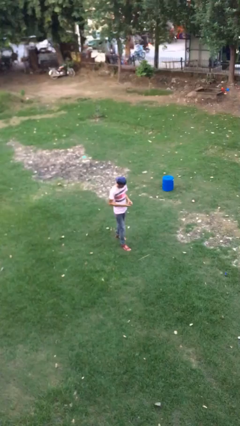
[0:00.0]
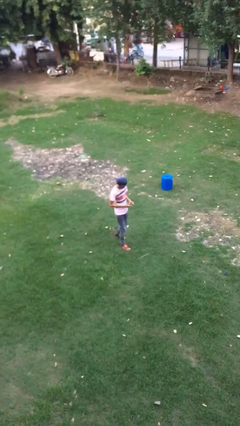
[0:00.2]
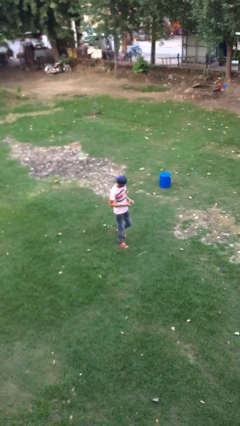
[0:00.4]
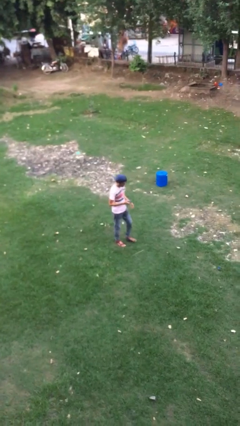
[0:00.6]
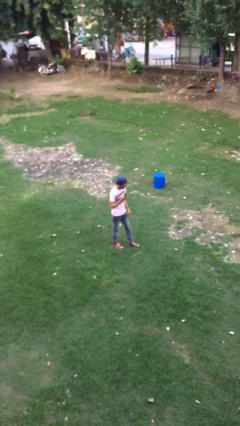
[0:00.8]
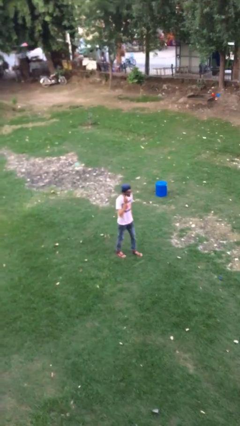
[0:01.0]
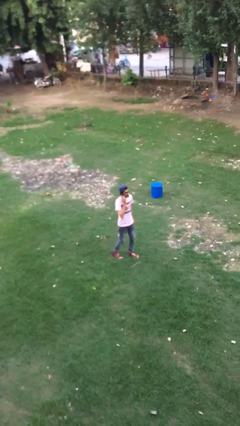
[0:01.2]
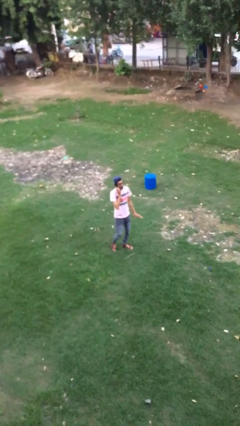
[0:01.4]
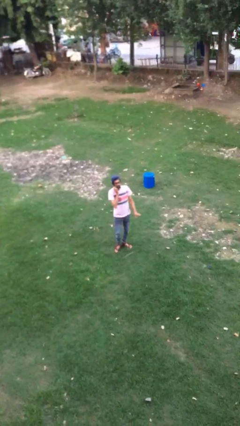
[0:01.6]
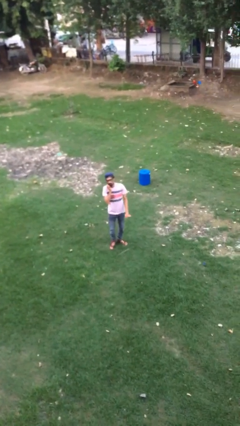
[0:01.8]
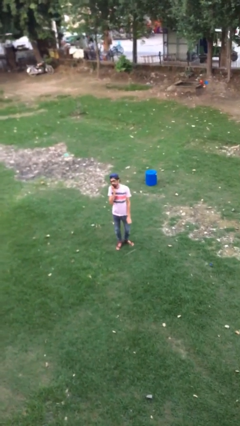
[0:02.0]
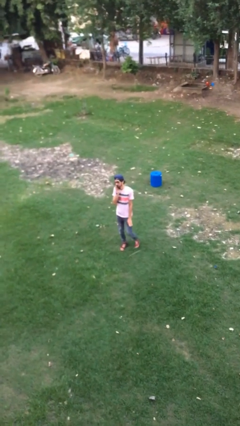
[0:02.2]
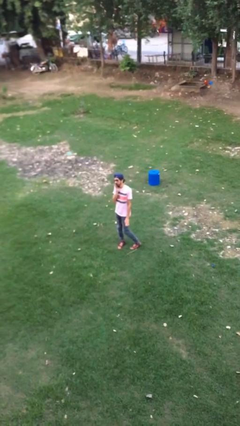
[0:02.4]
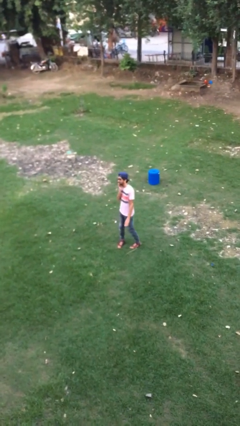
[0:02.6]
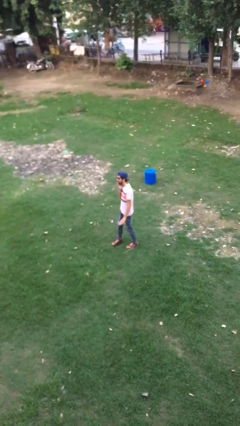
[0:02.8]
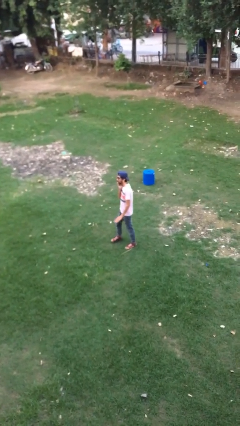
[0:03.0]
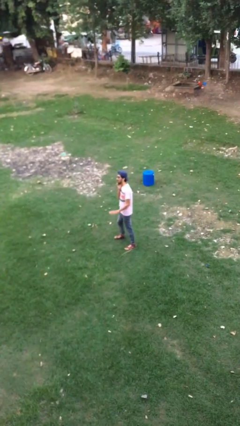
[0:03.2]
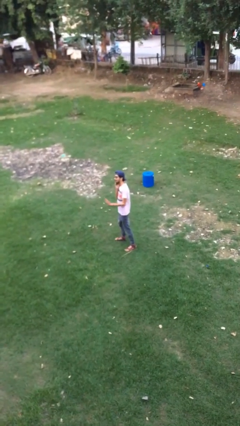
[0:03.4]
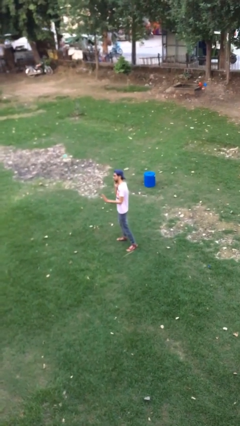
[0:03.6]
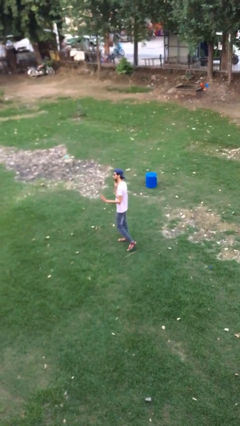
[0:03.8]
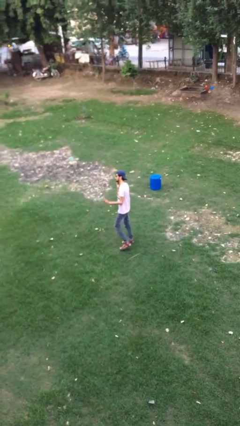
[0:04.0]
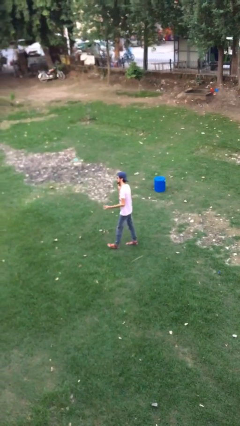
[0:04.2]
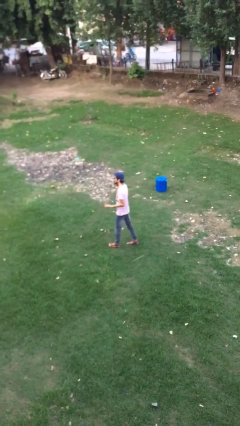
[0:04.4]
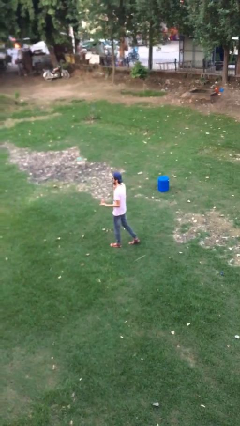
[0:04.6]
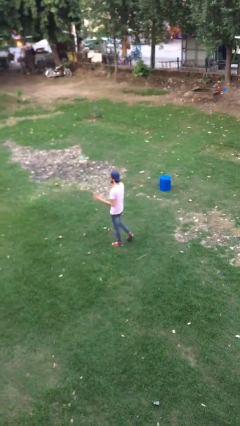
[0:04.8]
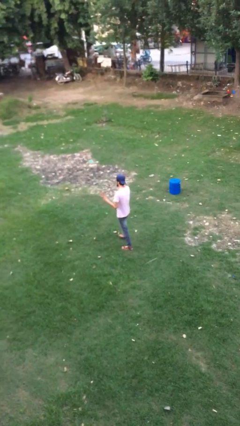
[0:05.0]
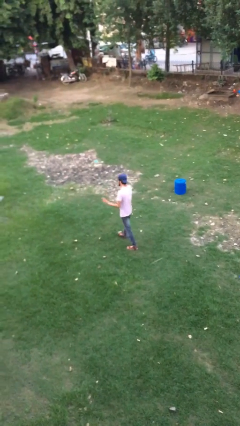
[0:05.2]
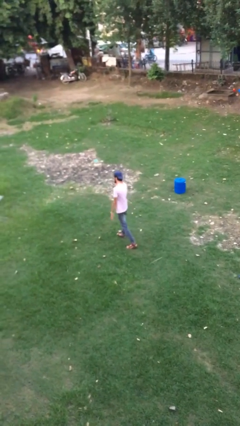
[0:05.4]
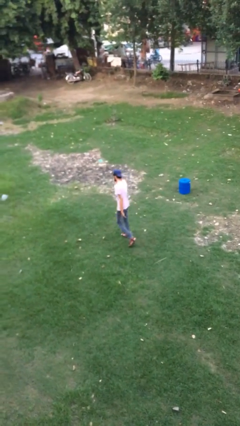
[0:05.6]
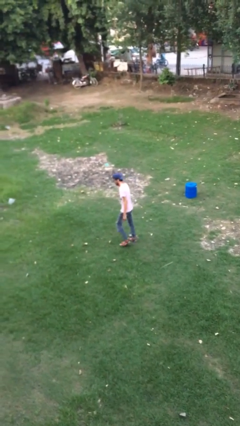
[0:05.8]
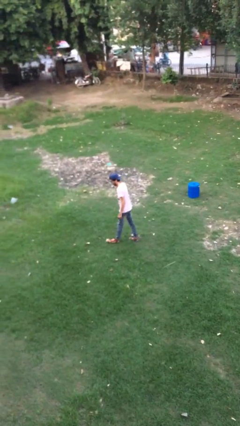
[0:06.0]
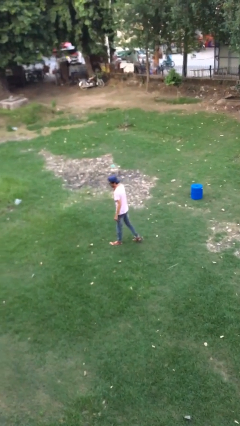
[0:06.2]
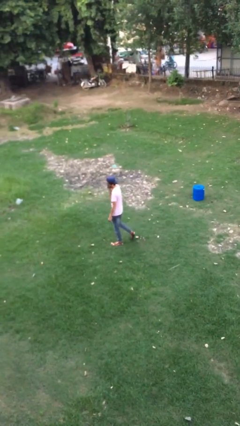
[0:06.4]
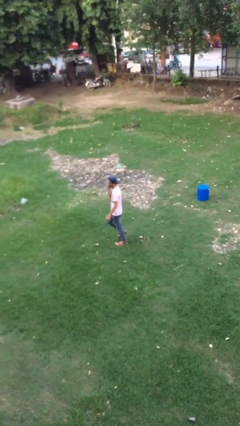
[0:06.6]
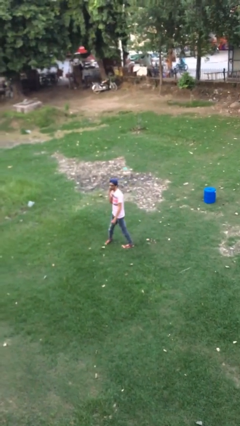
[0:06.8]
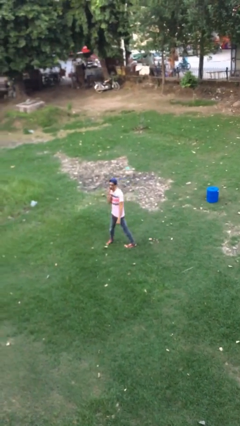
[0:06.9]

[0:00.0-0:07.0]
person talks on phone

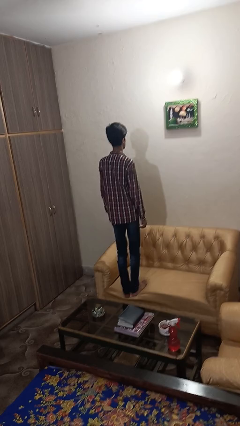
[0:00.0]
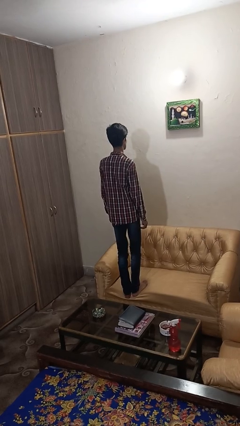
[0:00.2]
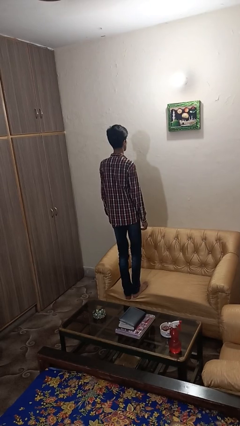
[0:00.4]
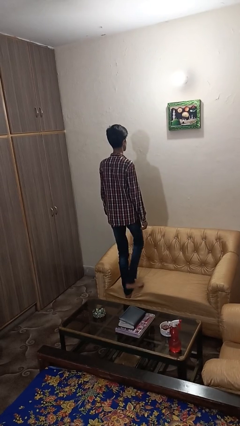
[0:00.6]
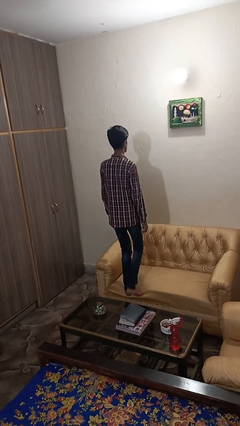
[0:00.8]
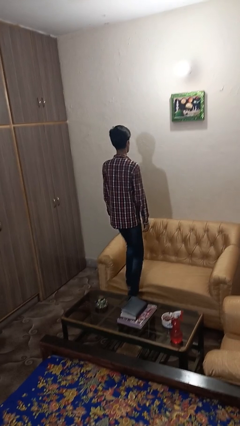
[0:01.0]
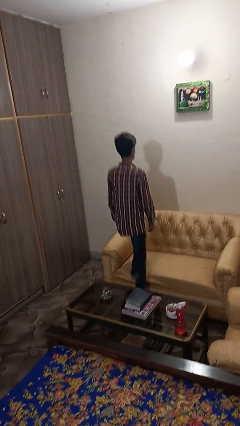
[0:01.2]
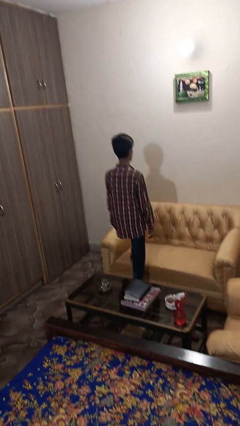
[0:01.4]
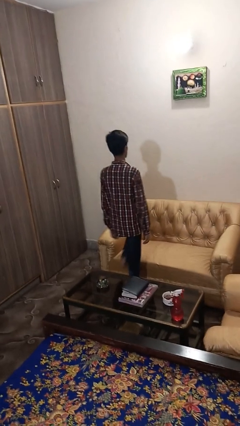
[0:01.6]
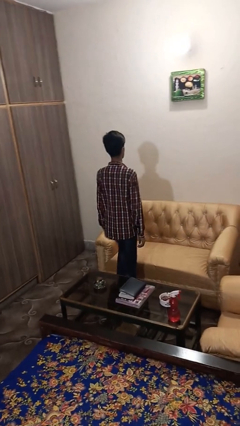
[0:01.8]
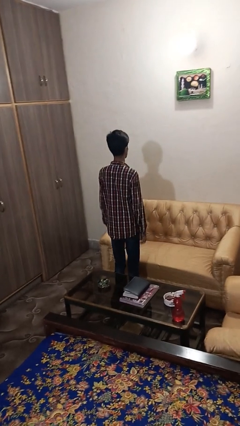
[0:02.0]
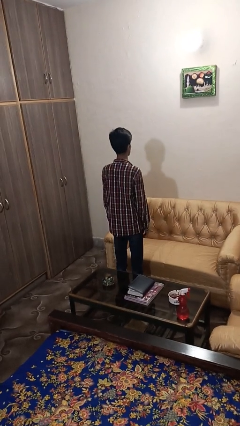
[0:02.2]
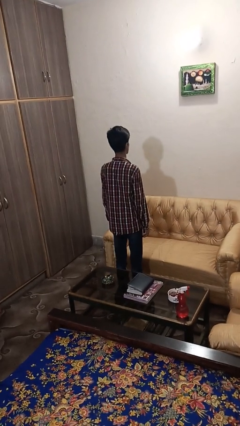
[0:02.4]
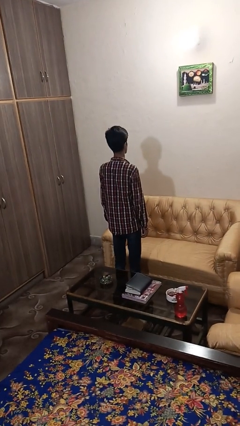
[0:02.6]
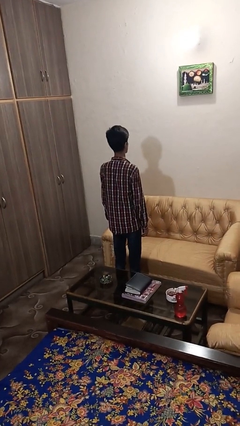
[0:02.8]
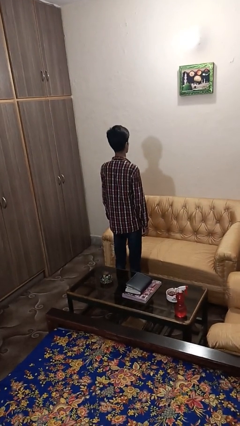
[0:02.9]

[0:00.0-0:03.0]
person climbs off couch

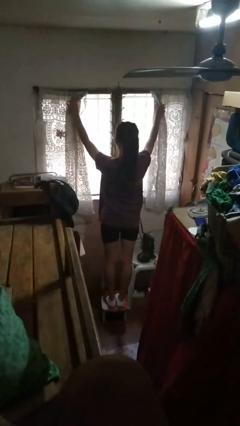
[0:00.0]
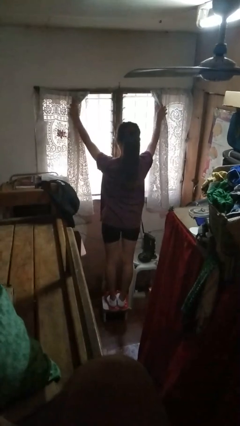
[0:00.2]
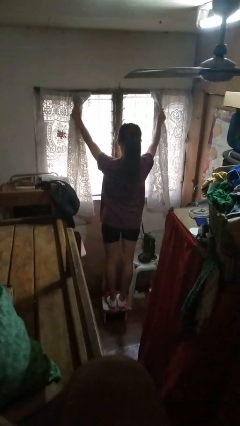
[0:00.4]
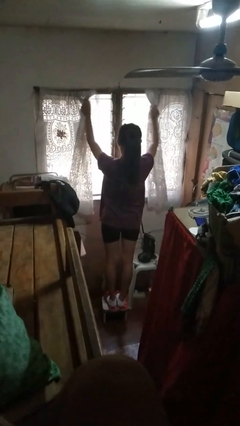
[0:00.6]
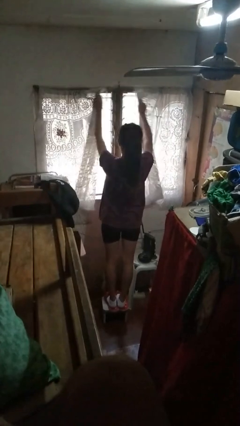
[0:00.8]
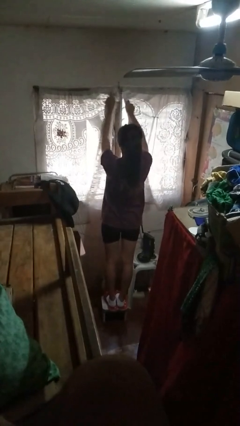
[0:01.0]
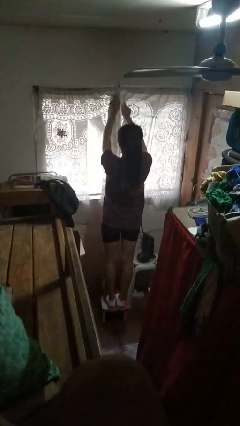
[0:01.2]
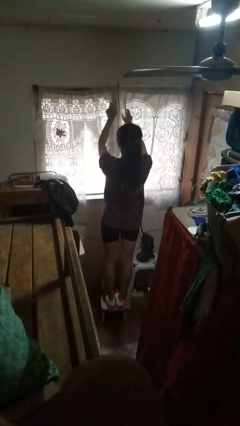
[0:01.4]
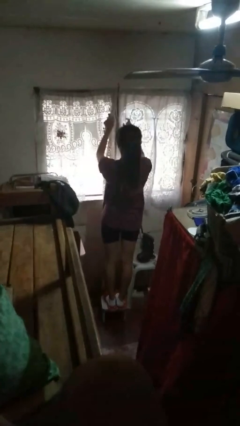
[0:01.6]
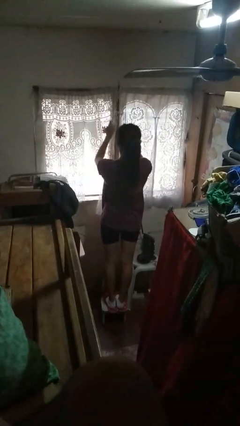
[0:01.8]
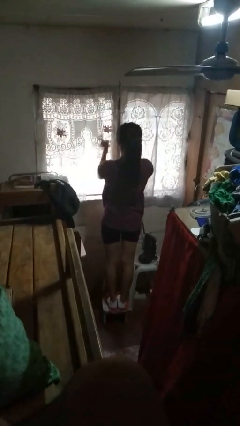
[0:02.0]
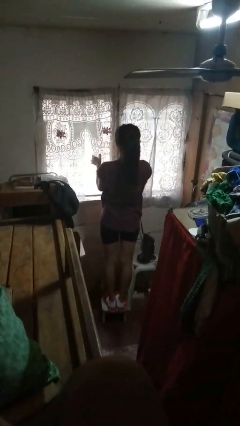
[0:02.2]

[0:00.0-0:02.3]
person closes curtains

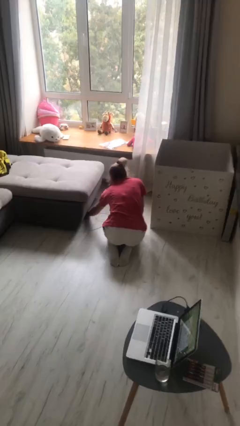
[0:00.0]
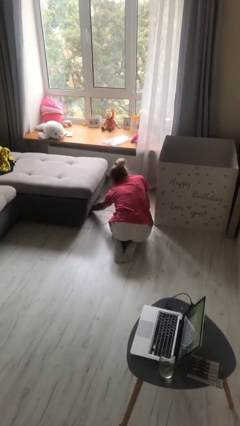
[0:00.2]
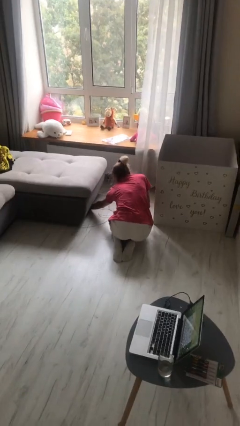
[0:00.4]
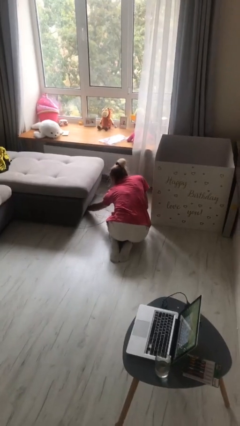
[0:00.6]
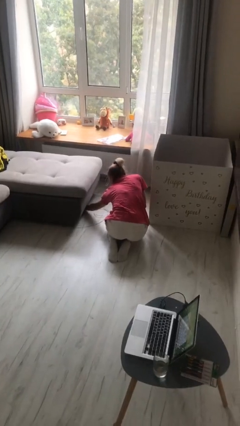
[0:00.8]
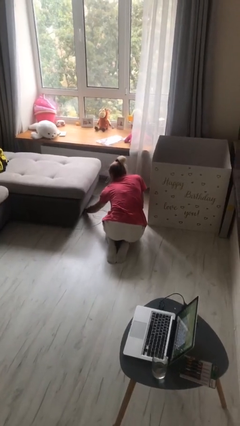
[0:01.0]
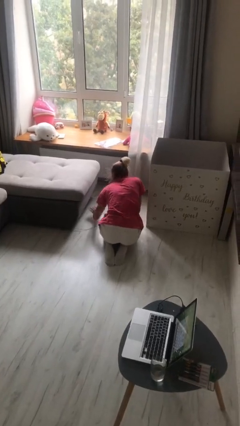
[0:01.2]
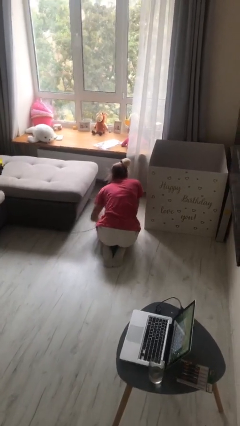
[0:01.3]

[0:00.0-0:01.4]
person searches under couch

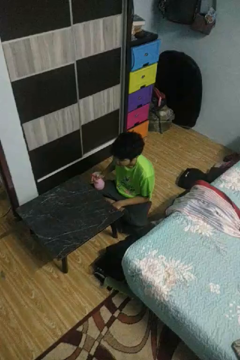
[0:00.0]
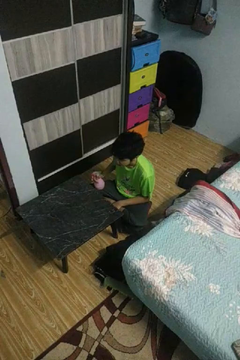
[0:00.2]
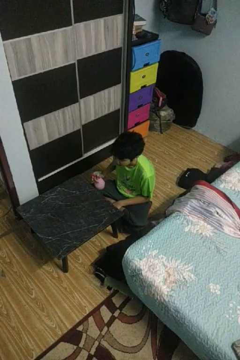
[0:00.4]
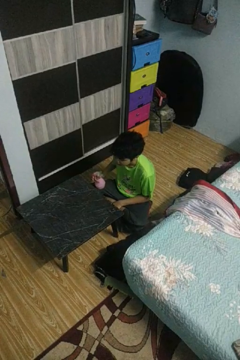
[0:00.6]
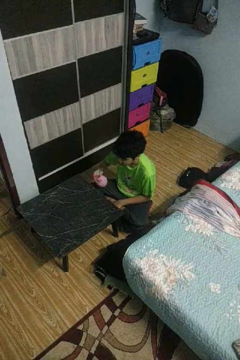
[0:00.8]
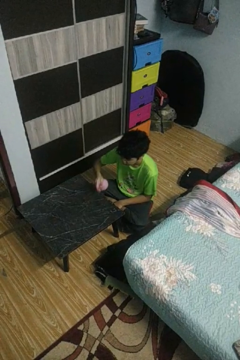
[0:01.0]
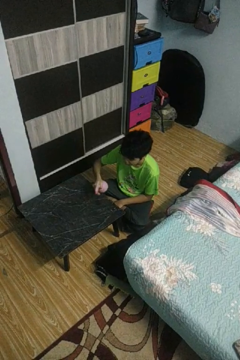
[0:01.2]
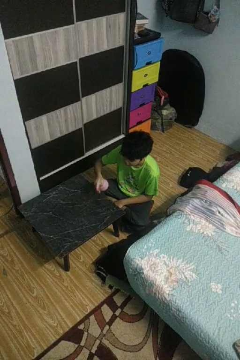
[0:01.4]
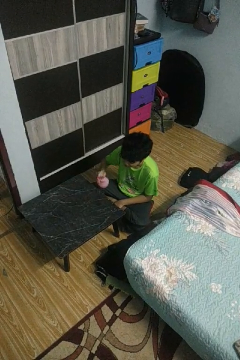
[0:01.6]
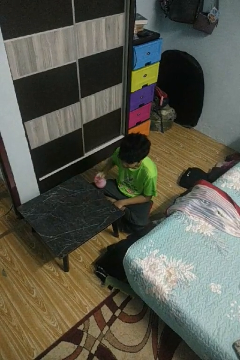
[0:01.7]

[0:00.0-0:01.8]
person sprays from bottle

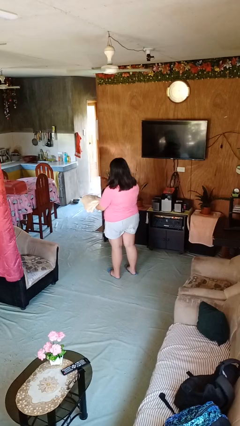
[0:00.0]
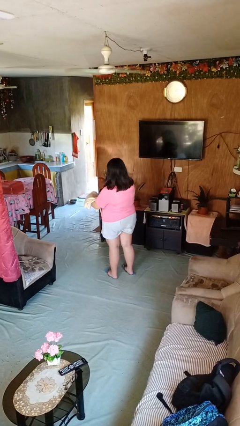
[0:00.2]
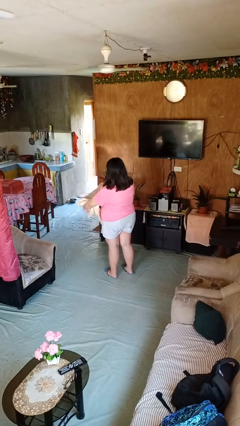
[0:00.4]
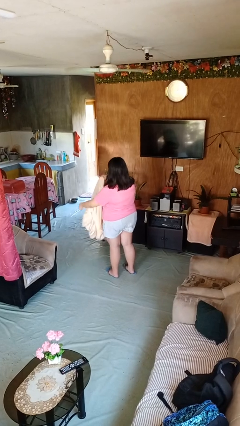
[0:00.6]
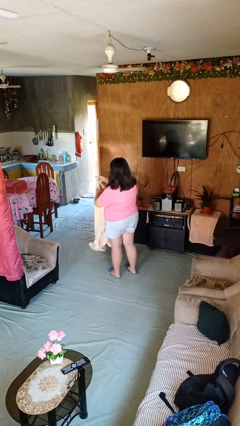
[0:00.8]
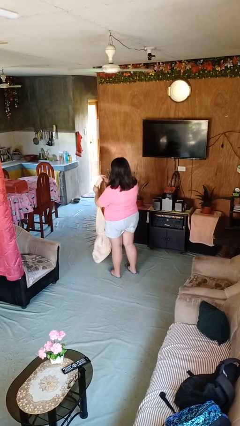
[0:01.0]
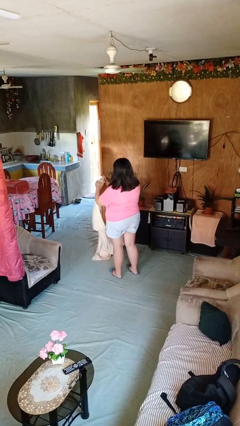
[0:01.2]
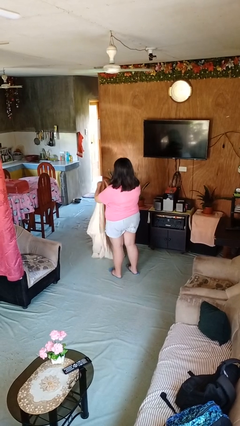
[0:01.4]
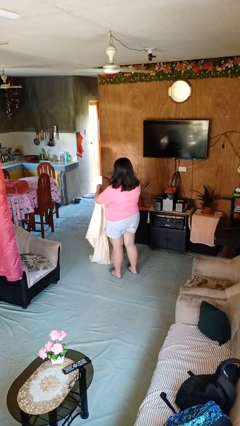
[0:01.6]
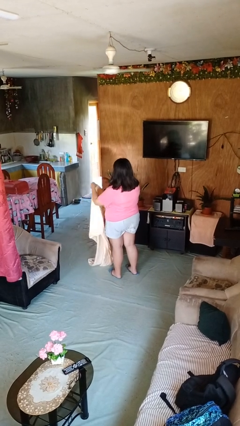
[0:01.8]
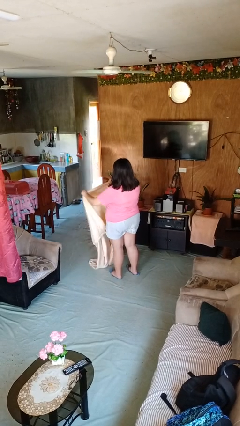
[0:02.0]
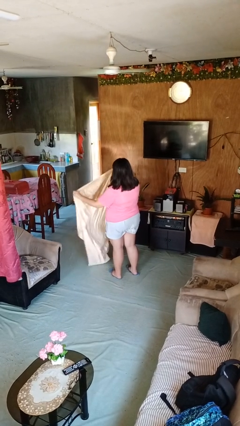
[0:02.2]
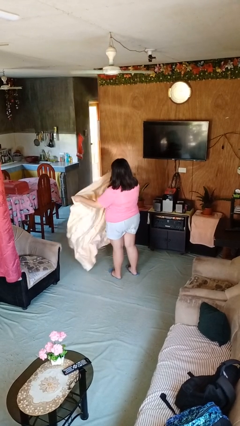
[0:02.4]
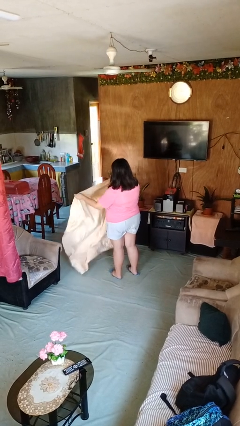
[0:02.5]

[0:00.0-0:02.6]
person unfolds blanket
